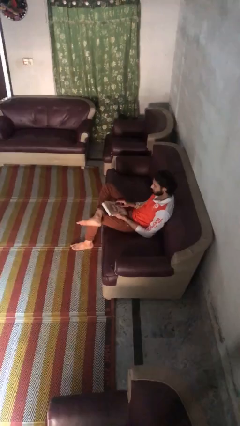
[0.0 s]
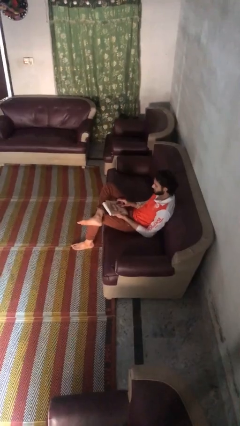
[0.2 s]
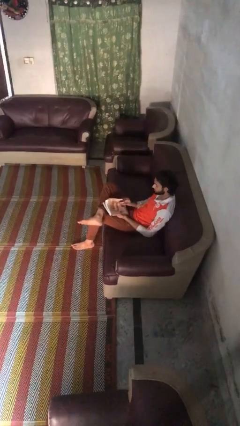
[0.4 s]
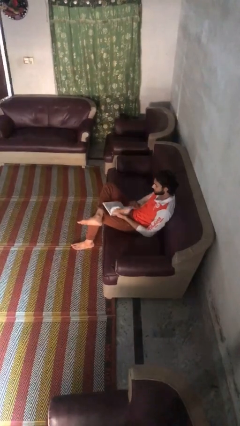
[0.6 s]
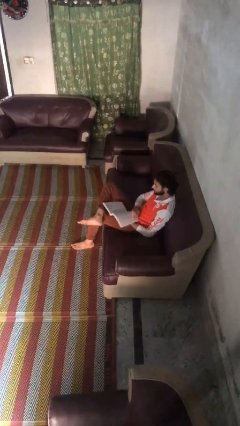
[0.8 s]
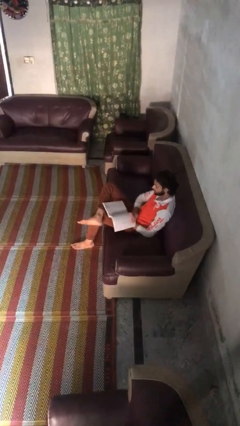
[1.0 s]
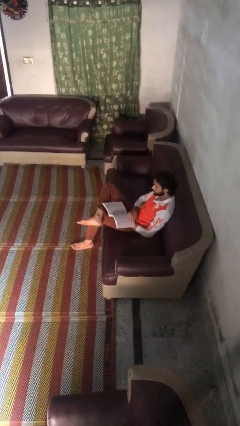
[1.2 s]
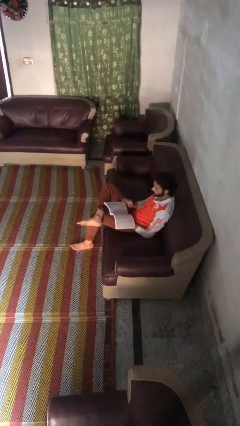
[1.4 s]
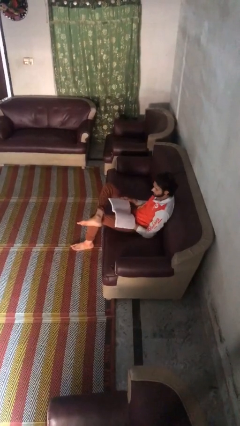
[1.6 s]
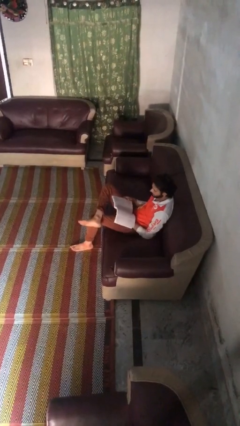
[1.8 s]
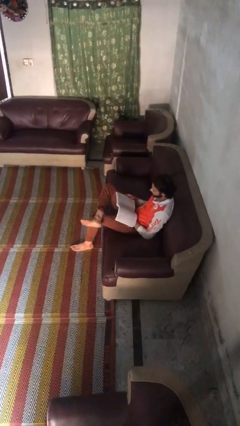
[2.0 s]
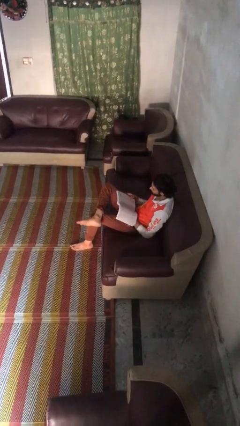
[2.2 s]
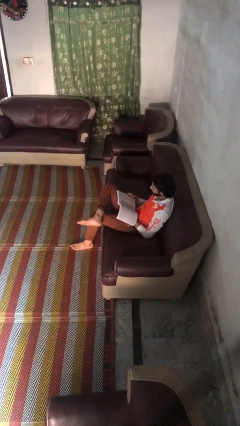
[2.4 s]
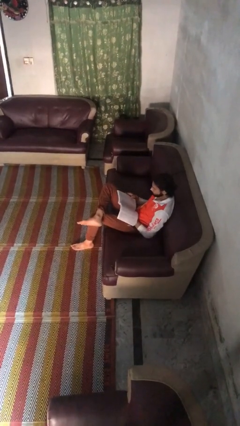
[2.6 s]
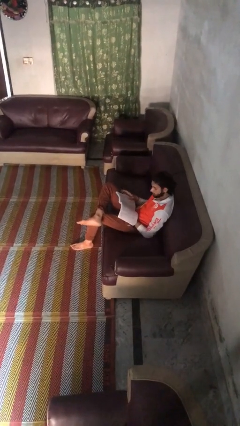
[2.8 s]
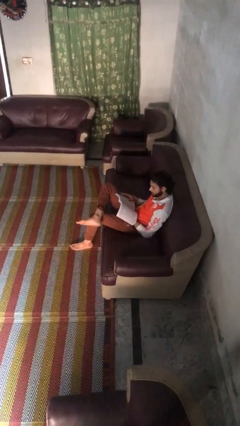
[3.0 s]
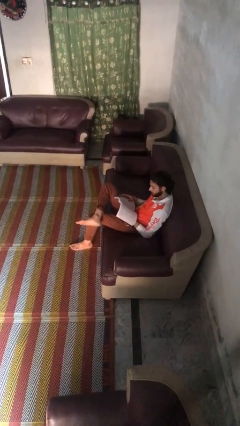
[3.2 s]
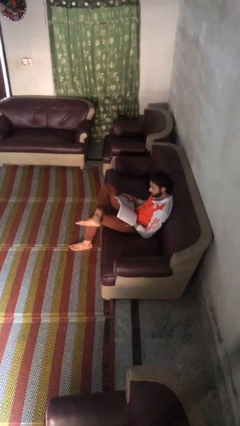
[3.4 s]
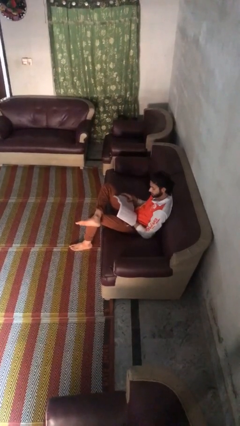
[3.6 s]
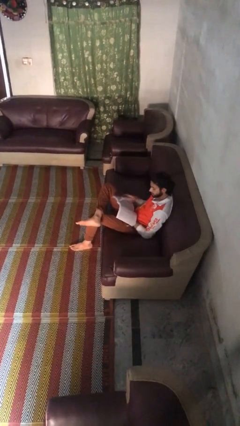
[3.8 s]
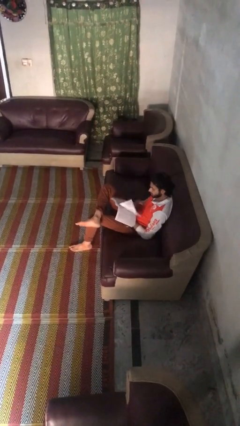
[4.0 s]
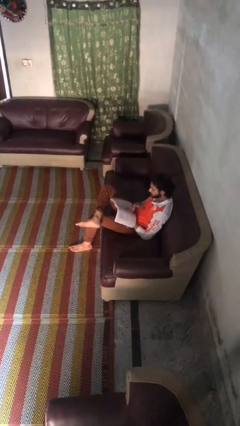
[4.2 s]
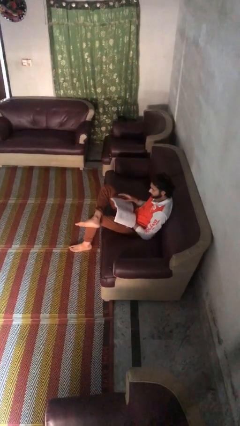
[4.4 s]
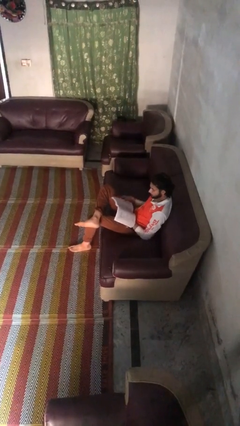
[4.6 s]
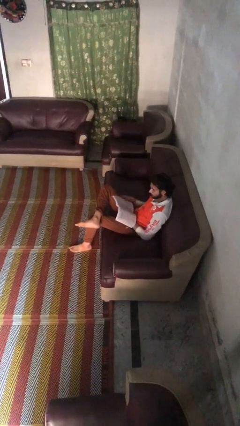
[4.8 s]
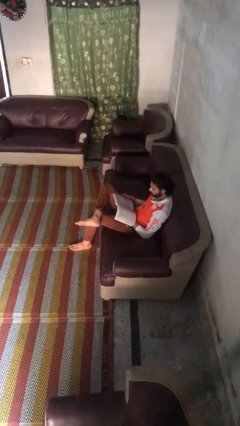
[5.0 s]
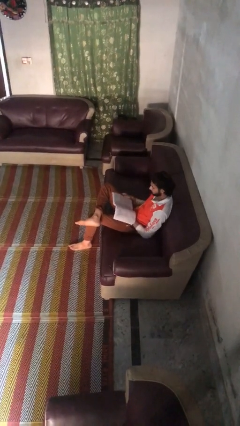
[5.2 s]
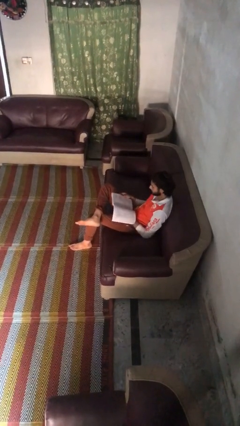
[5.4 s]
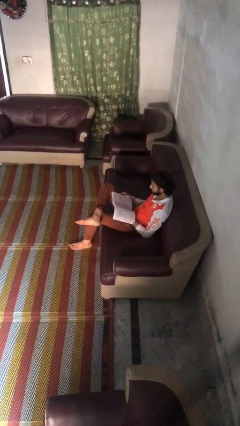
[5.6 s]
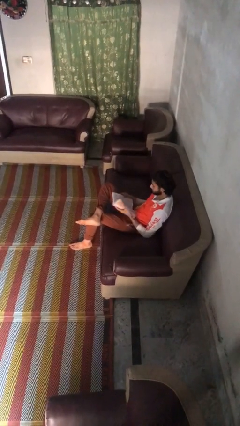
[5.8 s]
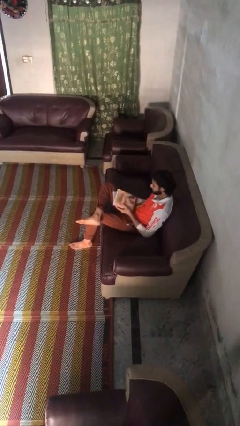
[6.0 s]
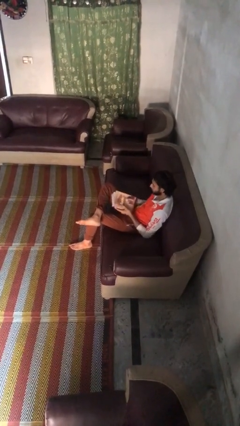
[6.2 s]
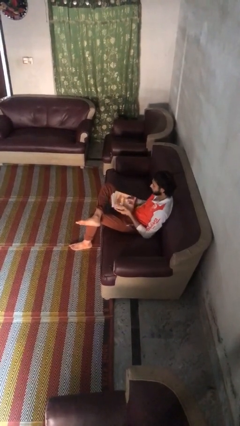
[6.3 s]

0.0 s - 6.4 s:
person reads book

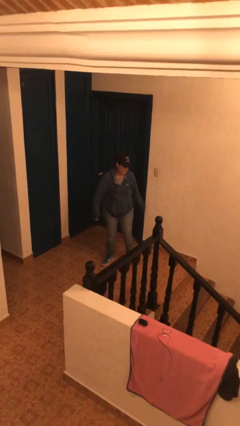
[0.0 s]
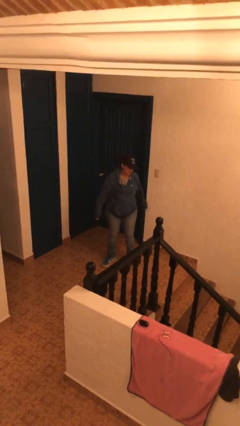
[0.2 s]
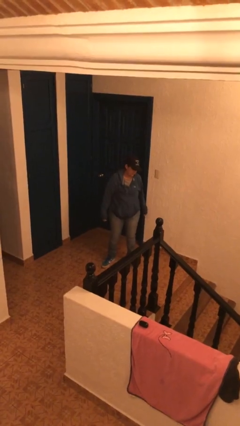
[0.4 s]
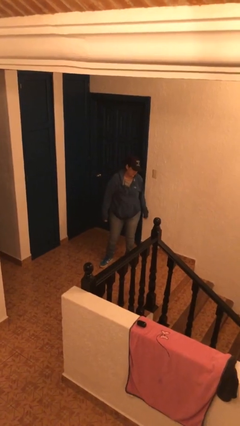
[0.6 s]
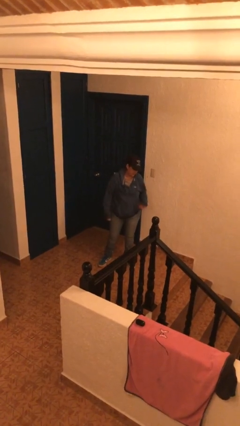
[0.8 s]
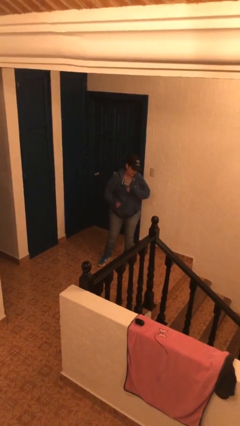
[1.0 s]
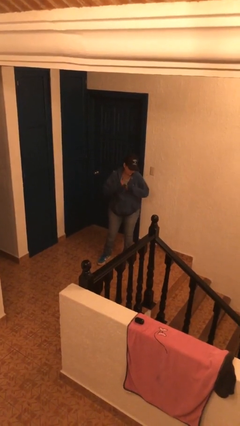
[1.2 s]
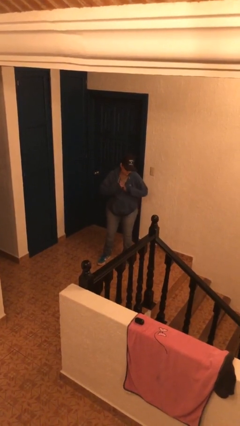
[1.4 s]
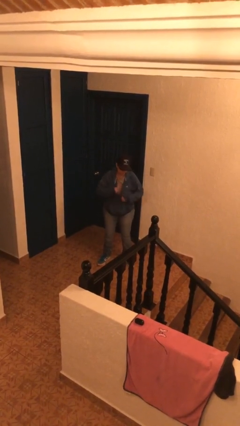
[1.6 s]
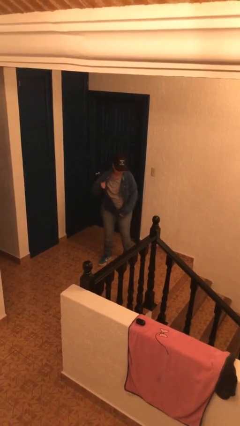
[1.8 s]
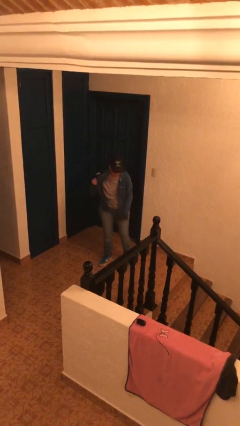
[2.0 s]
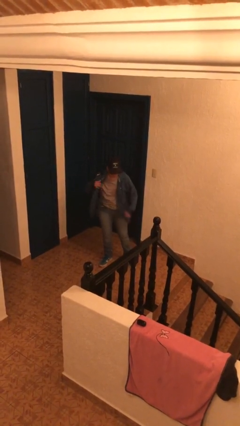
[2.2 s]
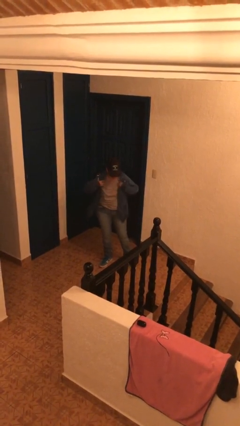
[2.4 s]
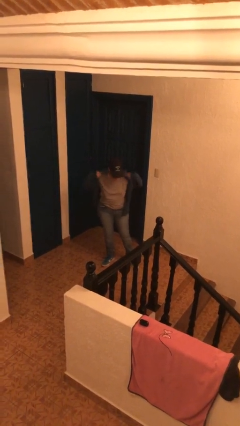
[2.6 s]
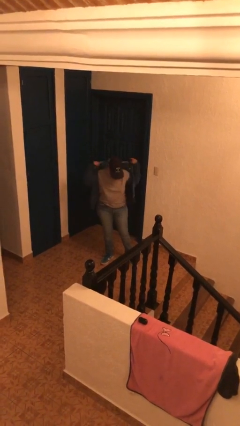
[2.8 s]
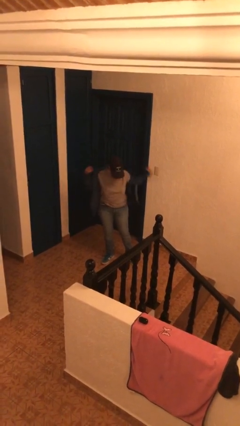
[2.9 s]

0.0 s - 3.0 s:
person unzips jacket

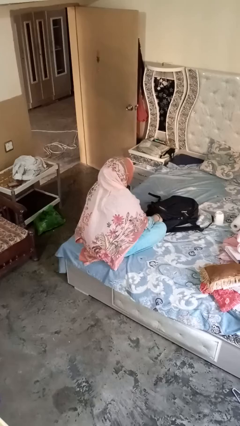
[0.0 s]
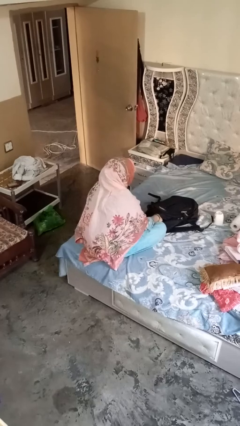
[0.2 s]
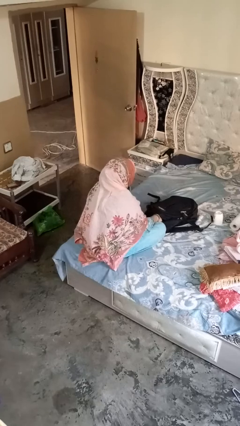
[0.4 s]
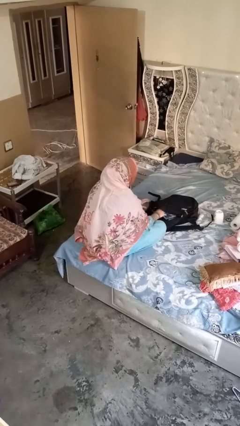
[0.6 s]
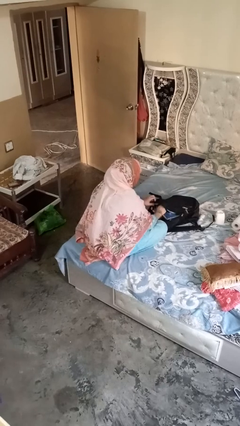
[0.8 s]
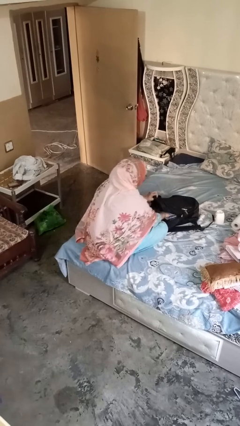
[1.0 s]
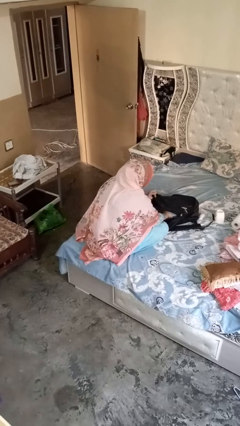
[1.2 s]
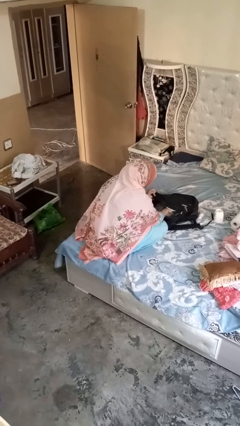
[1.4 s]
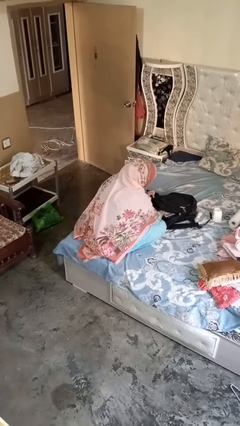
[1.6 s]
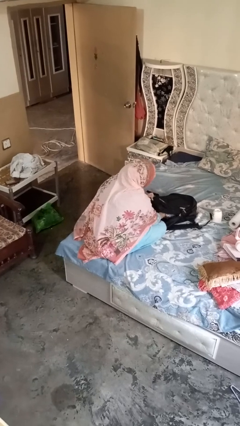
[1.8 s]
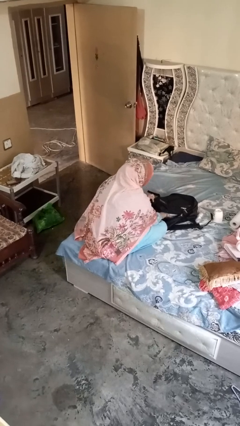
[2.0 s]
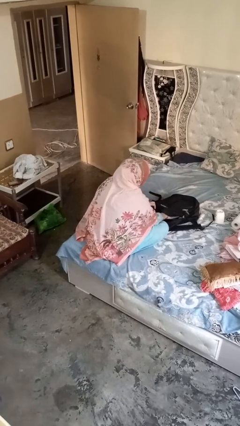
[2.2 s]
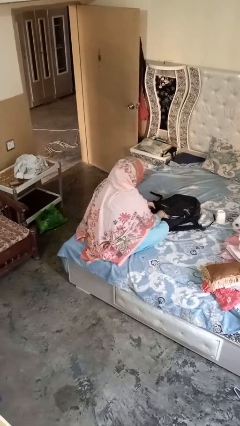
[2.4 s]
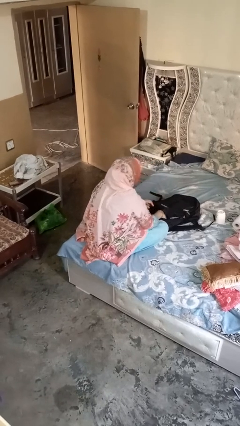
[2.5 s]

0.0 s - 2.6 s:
person searches in bag

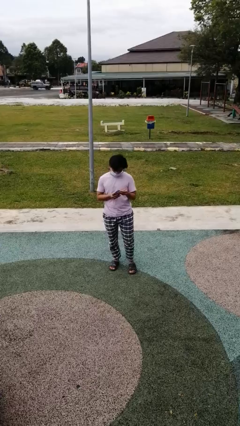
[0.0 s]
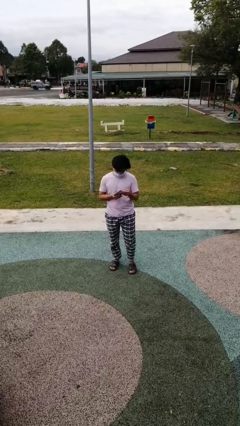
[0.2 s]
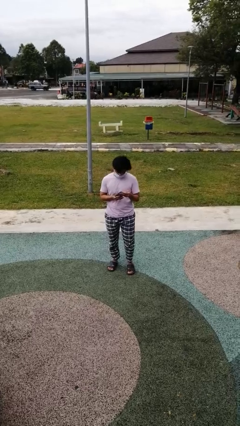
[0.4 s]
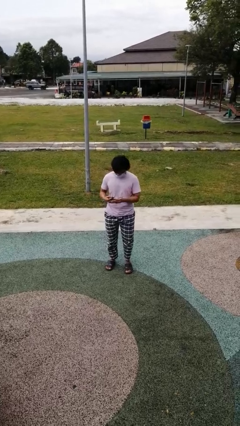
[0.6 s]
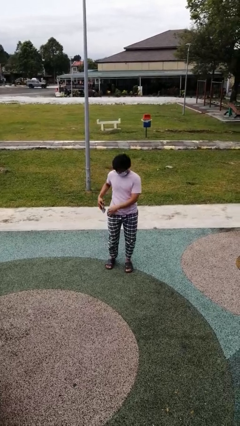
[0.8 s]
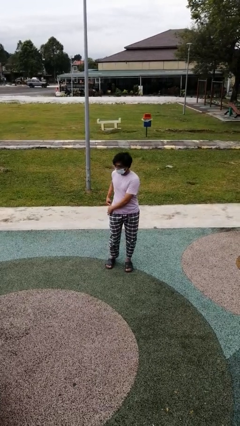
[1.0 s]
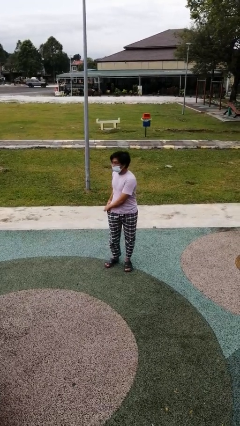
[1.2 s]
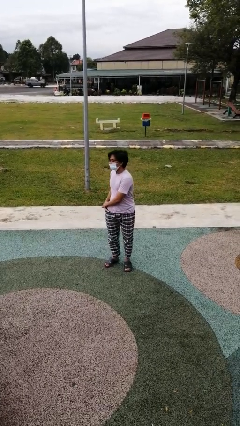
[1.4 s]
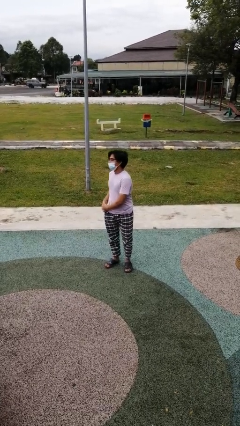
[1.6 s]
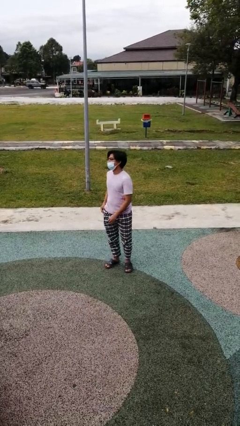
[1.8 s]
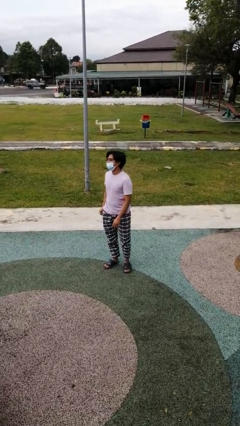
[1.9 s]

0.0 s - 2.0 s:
person puts phone into pocket

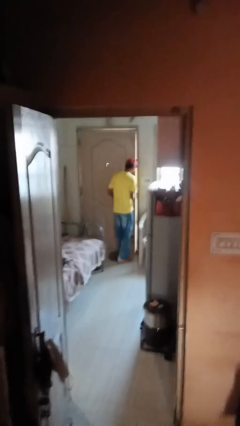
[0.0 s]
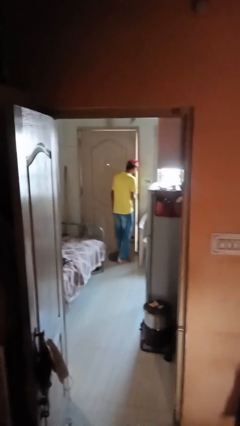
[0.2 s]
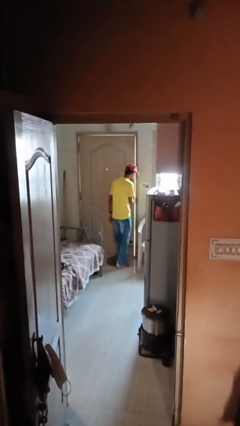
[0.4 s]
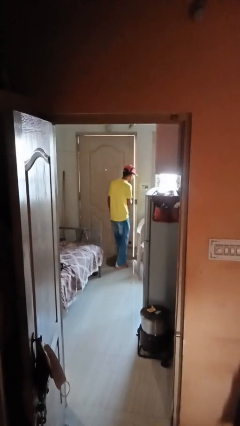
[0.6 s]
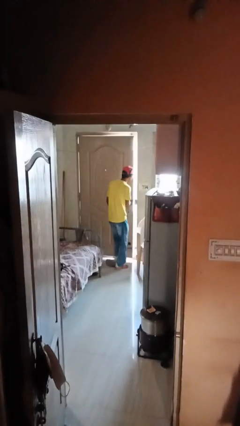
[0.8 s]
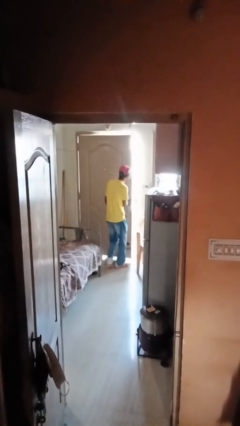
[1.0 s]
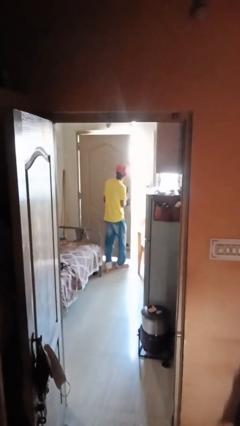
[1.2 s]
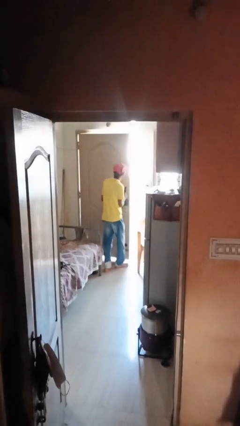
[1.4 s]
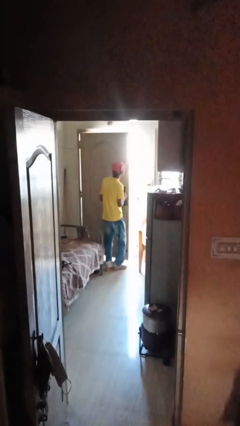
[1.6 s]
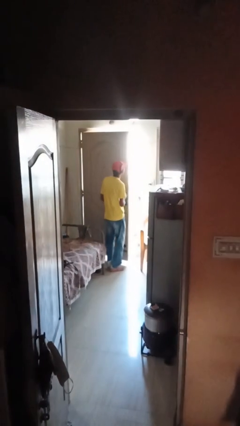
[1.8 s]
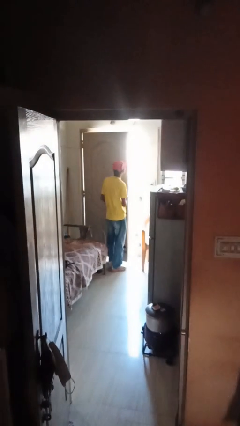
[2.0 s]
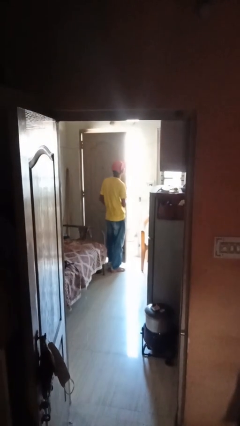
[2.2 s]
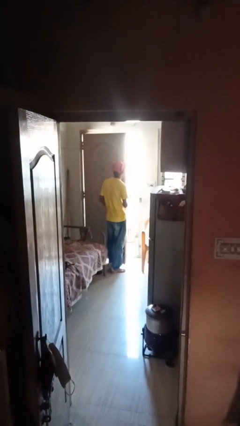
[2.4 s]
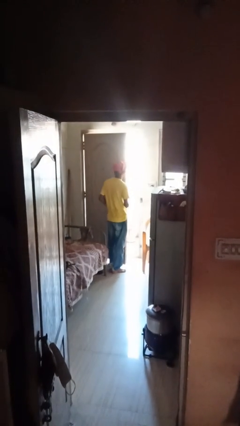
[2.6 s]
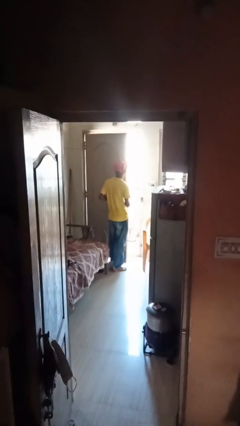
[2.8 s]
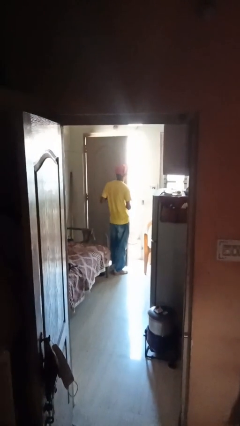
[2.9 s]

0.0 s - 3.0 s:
person opens facility door
